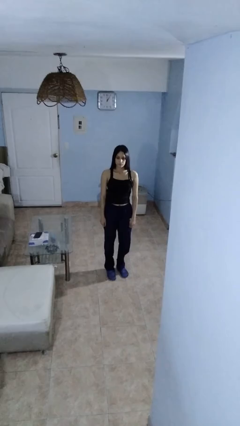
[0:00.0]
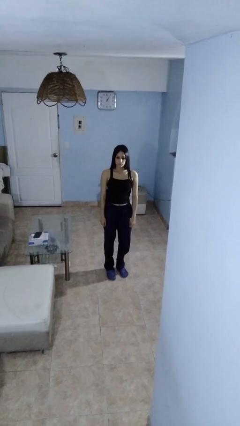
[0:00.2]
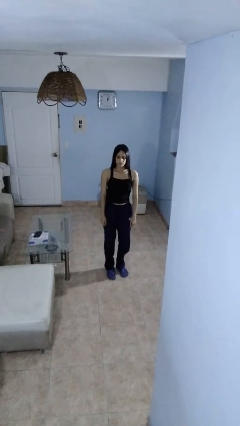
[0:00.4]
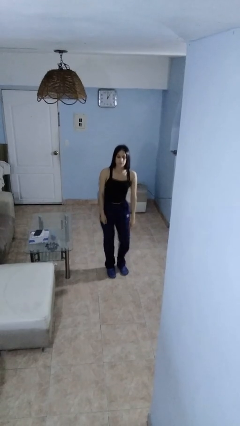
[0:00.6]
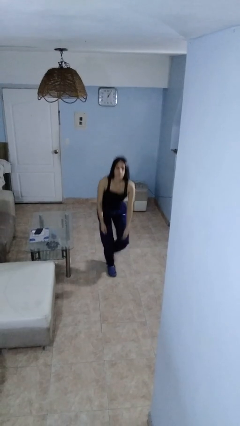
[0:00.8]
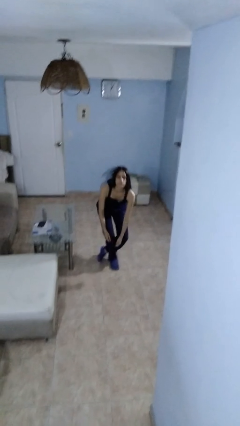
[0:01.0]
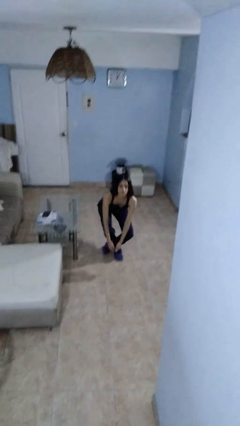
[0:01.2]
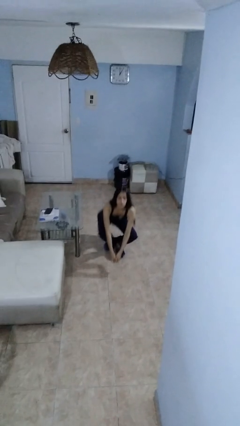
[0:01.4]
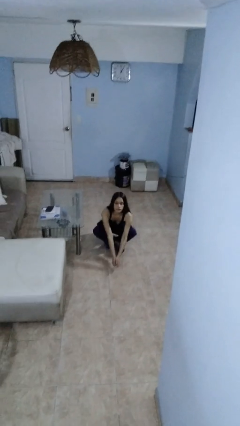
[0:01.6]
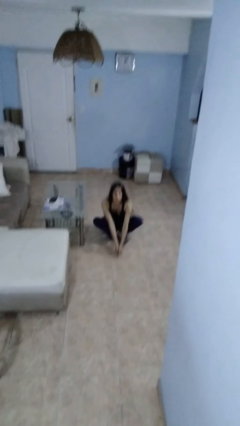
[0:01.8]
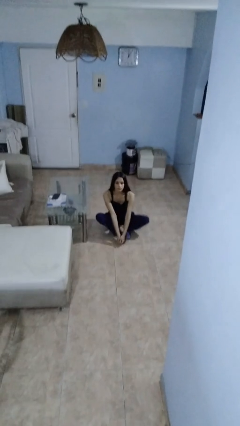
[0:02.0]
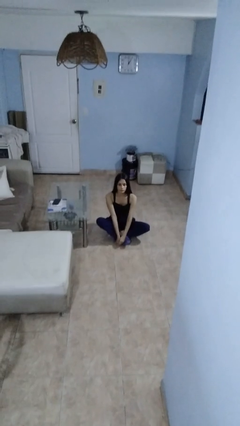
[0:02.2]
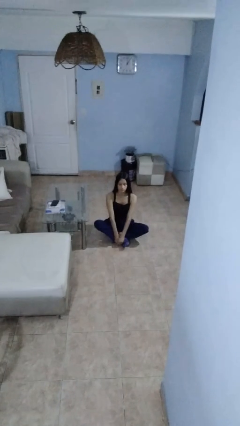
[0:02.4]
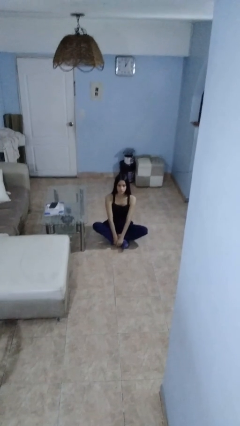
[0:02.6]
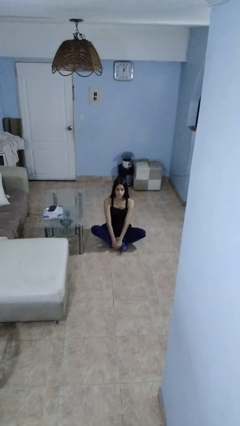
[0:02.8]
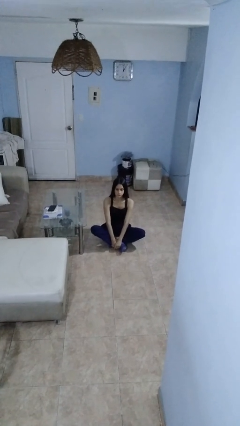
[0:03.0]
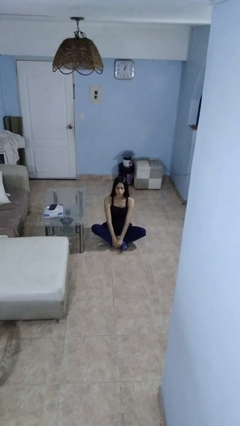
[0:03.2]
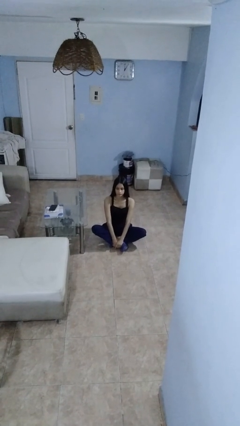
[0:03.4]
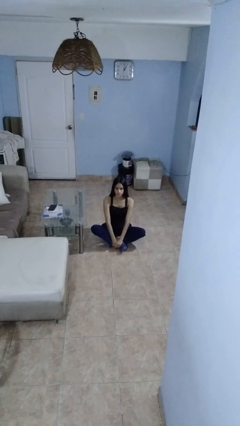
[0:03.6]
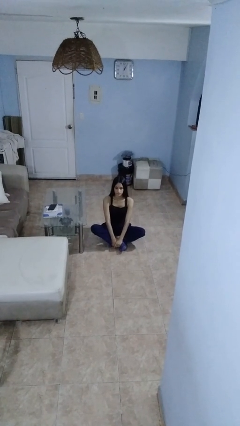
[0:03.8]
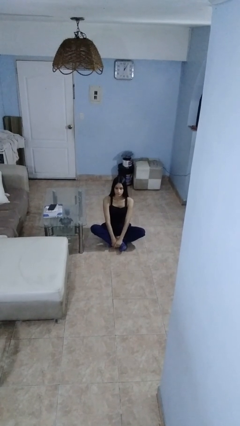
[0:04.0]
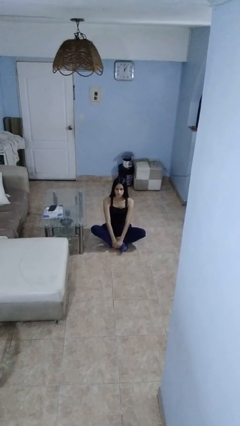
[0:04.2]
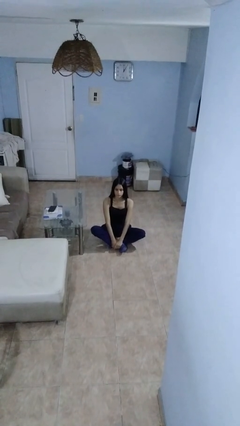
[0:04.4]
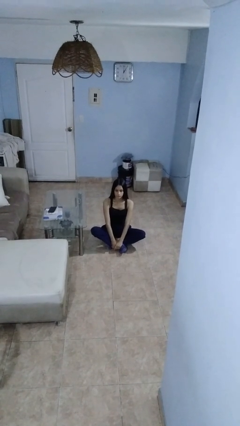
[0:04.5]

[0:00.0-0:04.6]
person sits crisscross

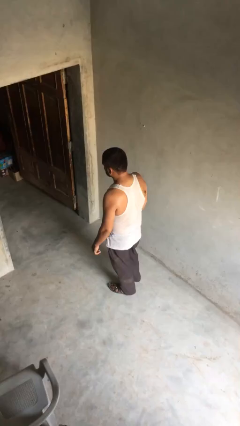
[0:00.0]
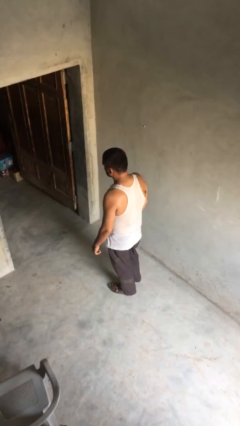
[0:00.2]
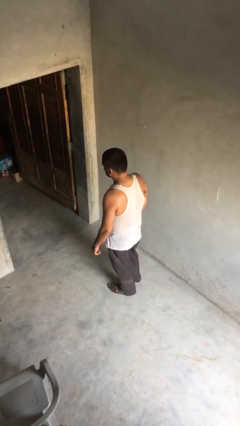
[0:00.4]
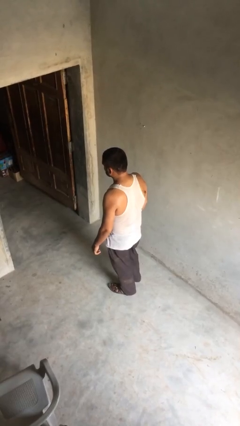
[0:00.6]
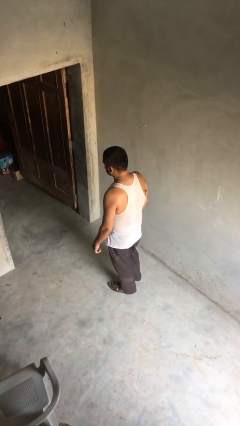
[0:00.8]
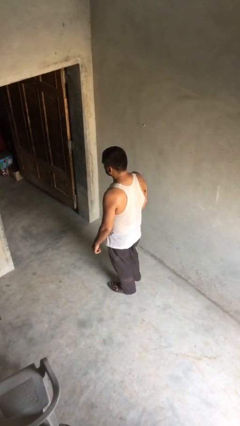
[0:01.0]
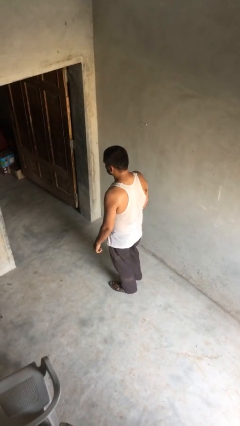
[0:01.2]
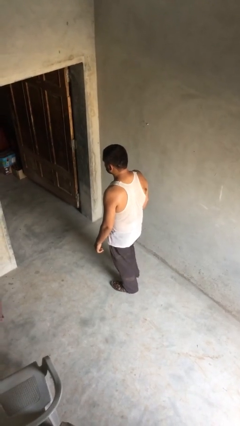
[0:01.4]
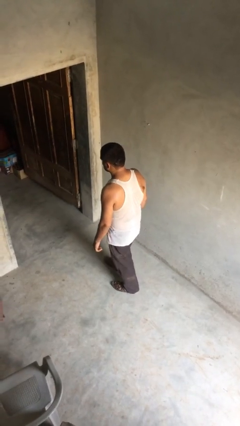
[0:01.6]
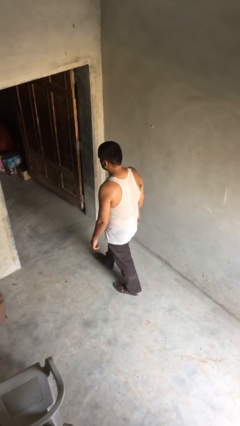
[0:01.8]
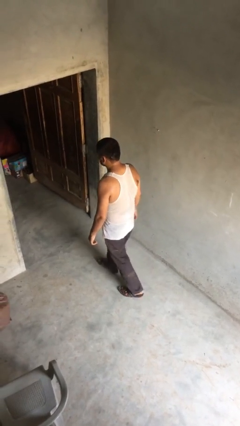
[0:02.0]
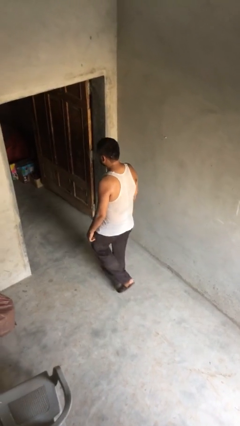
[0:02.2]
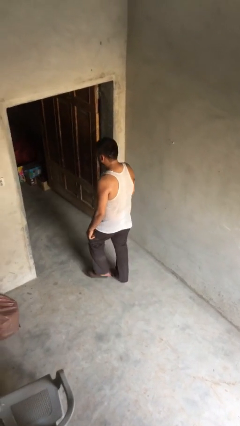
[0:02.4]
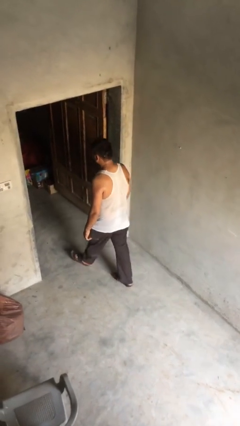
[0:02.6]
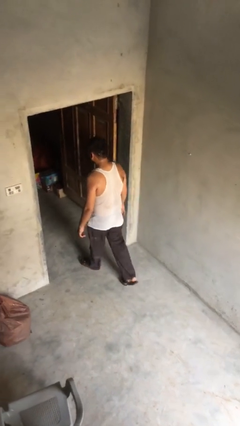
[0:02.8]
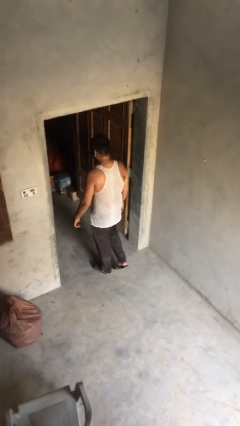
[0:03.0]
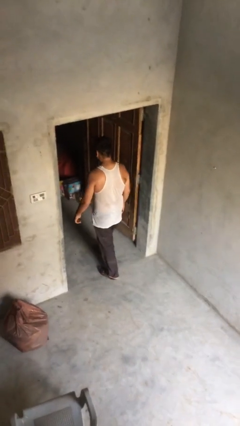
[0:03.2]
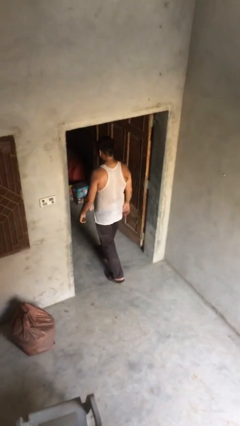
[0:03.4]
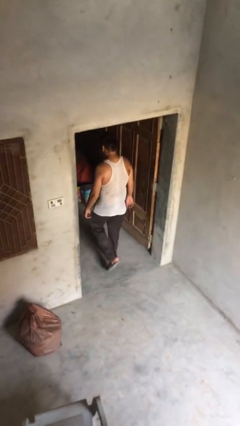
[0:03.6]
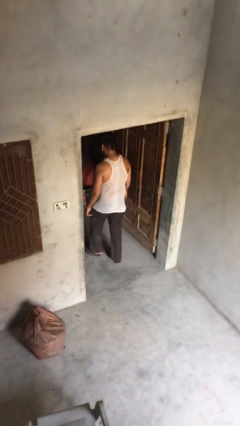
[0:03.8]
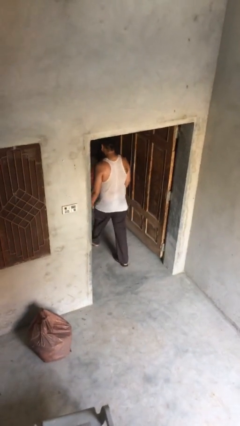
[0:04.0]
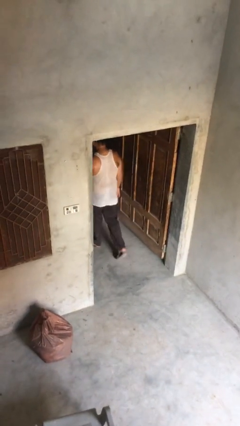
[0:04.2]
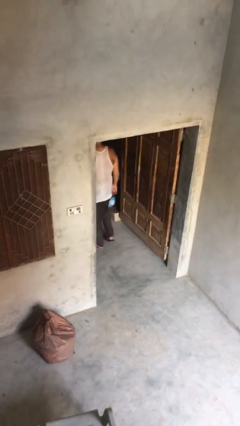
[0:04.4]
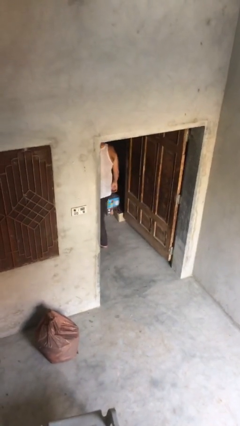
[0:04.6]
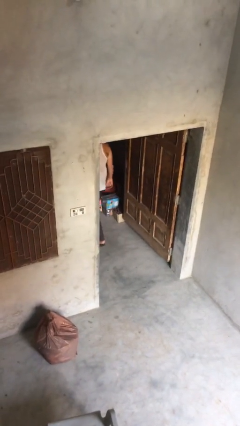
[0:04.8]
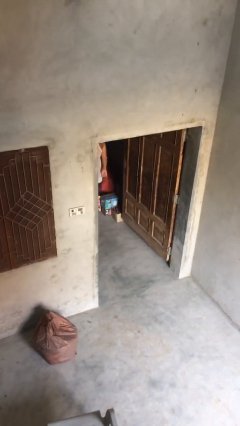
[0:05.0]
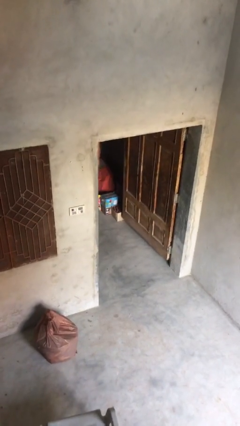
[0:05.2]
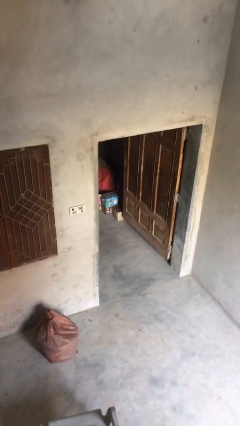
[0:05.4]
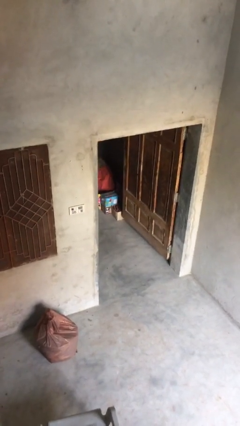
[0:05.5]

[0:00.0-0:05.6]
person exits scene through structure

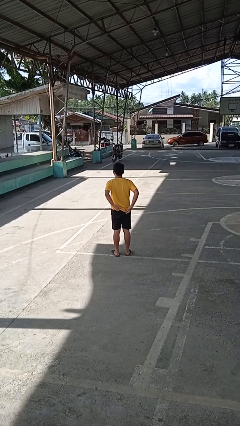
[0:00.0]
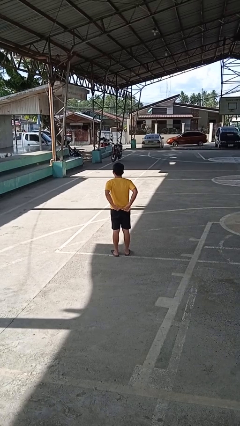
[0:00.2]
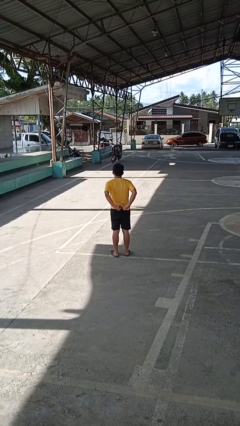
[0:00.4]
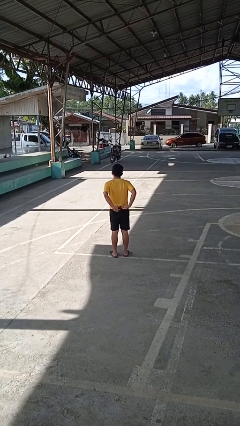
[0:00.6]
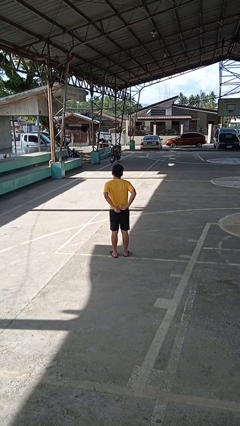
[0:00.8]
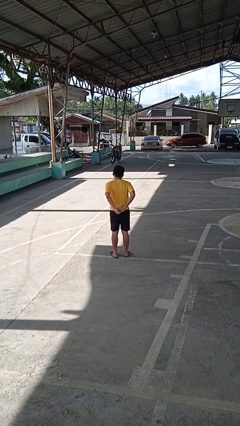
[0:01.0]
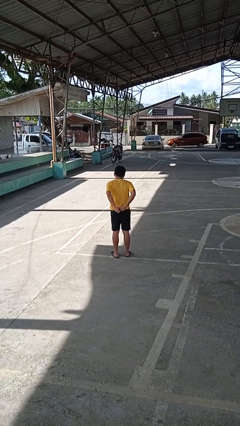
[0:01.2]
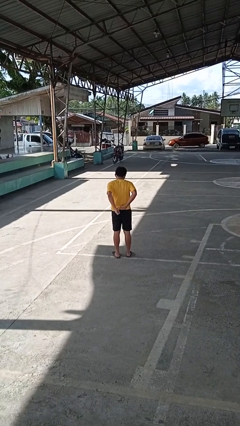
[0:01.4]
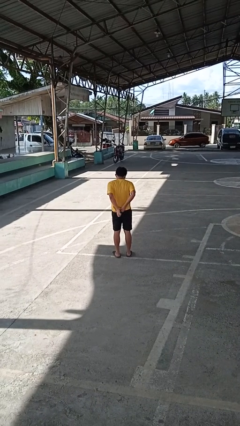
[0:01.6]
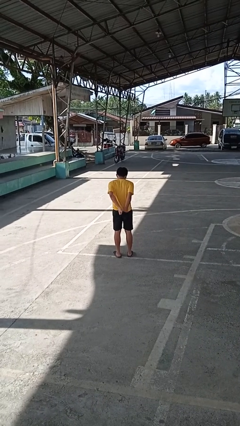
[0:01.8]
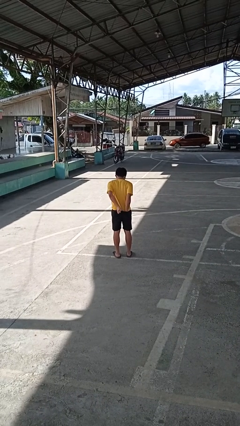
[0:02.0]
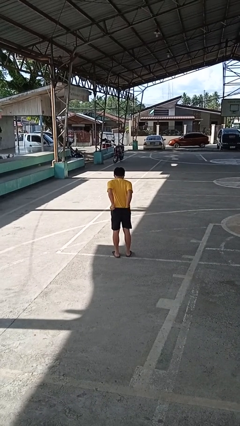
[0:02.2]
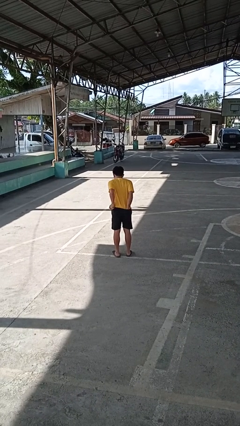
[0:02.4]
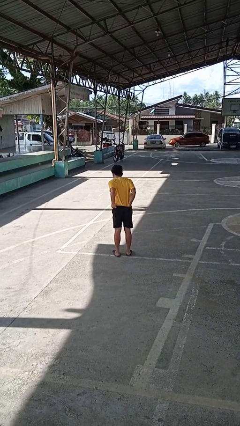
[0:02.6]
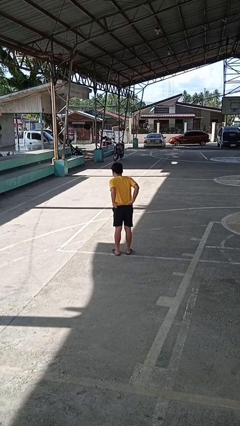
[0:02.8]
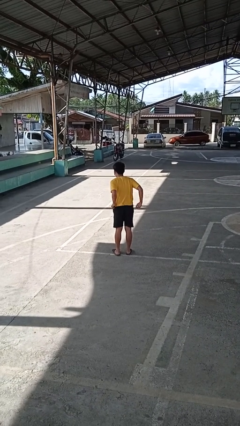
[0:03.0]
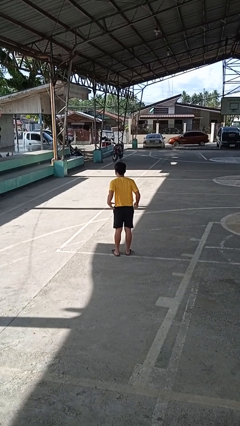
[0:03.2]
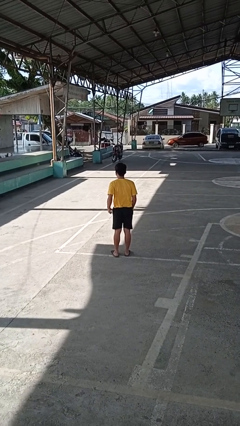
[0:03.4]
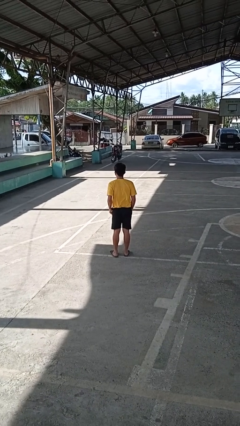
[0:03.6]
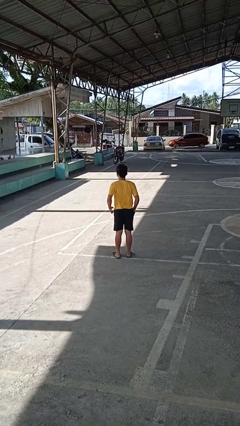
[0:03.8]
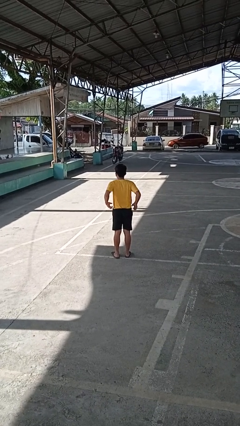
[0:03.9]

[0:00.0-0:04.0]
person tucks in shirt

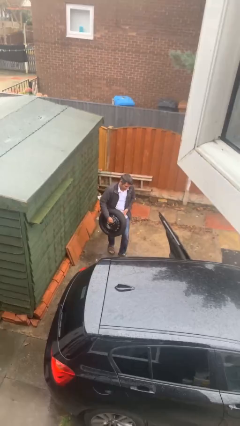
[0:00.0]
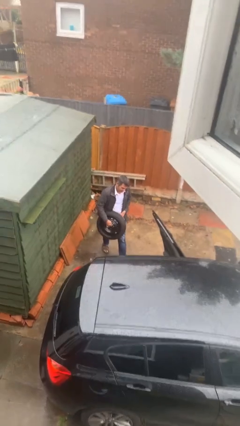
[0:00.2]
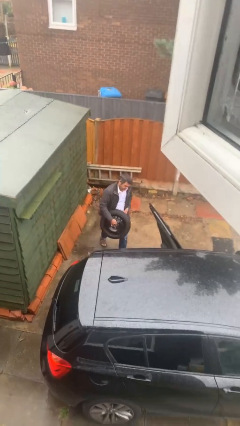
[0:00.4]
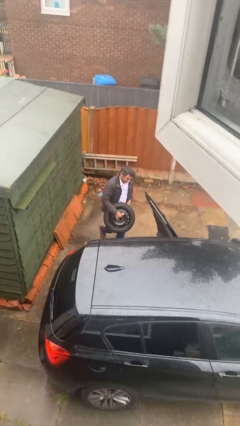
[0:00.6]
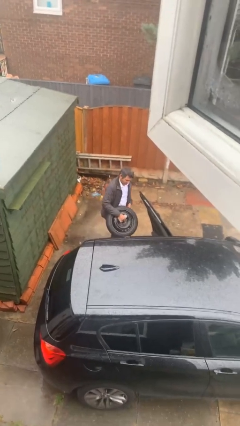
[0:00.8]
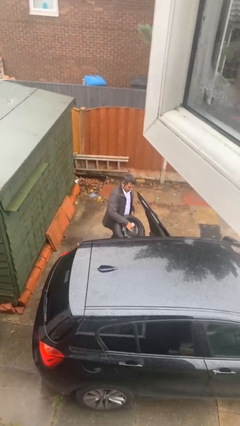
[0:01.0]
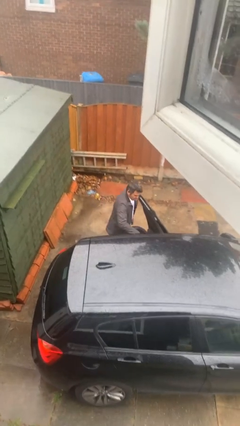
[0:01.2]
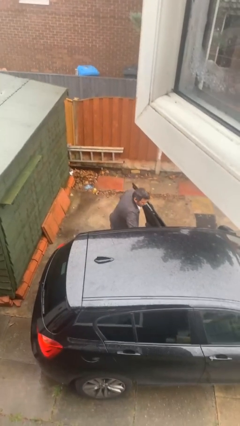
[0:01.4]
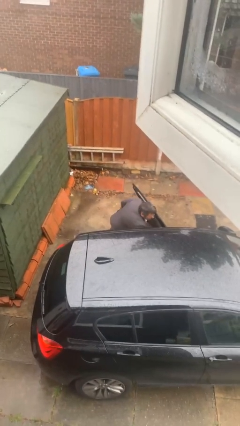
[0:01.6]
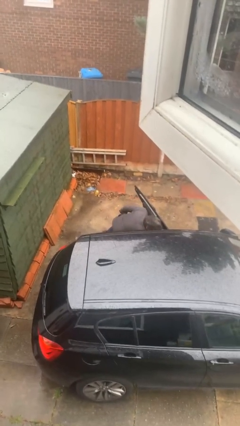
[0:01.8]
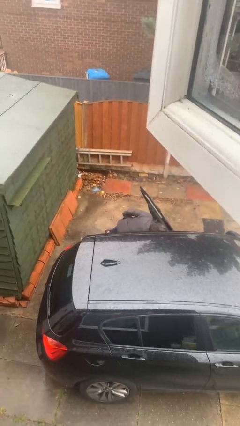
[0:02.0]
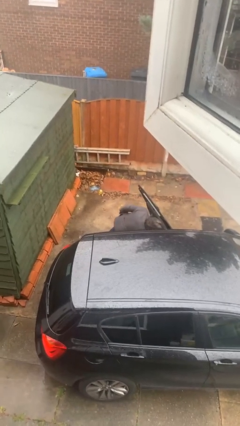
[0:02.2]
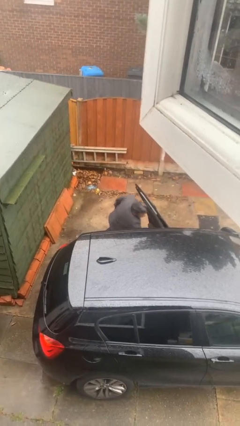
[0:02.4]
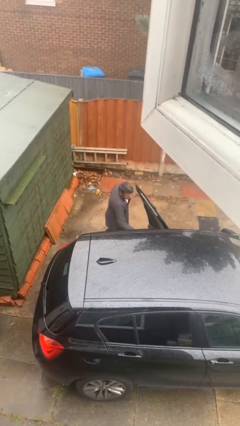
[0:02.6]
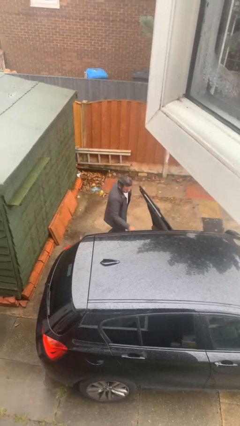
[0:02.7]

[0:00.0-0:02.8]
person loads car

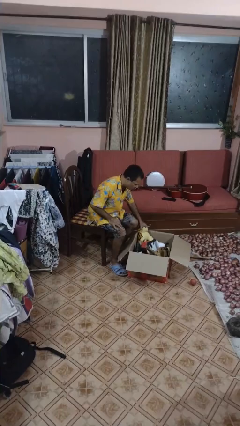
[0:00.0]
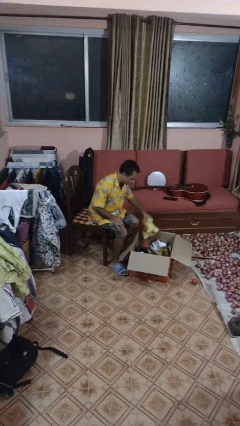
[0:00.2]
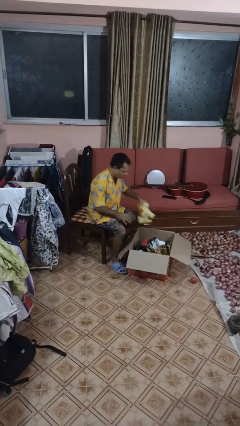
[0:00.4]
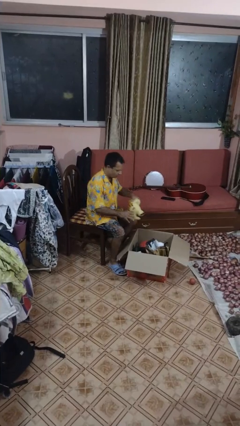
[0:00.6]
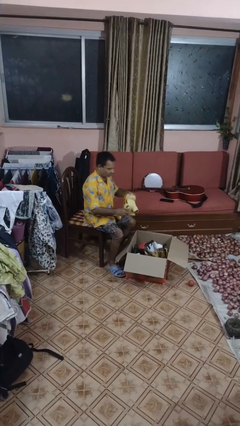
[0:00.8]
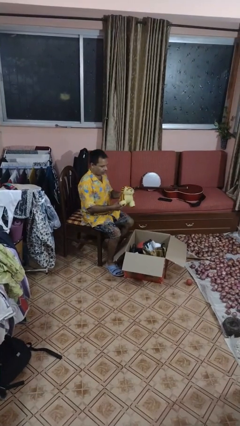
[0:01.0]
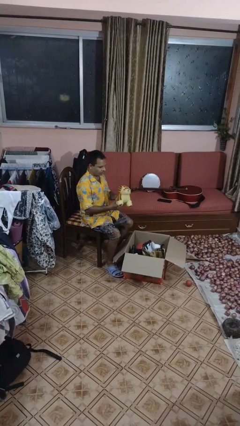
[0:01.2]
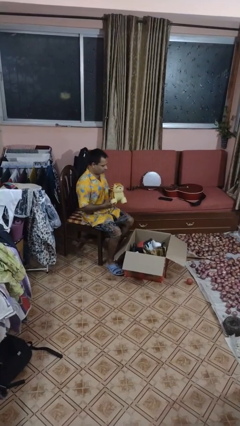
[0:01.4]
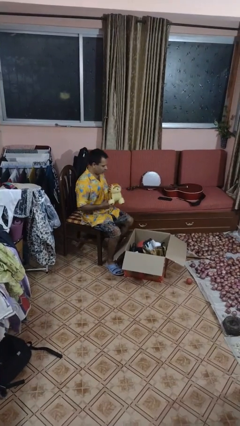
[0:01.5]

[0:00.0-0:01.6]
person takes object from box
